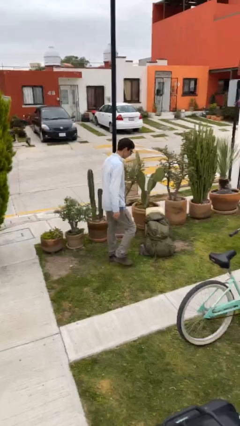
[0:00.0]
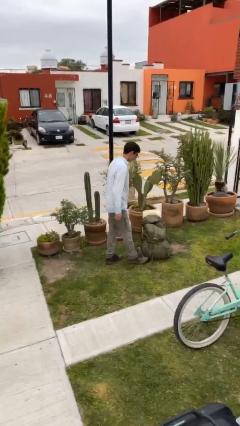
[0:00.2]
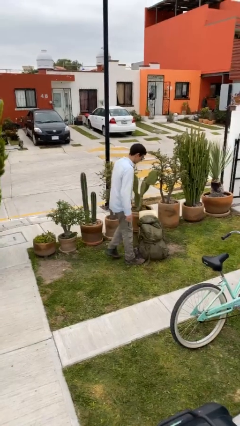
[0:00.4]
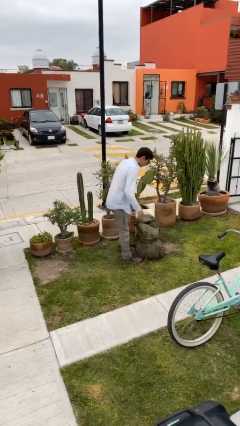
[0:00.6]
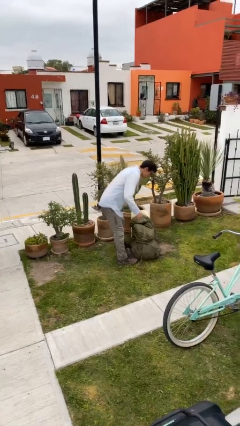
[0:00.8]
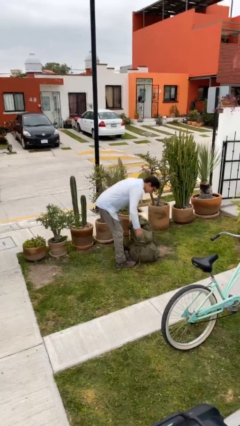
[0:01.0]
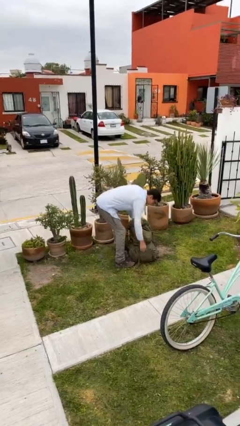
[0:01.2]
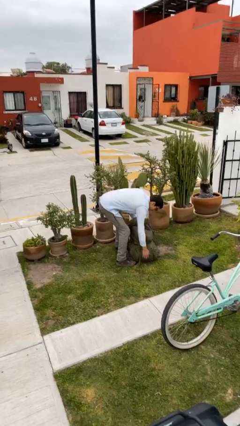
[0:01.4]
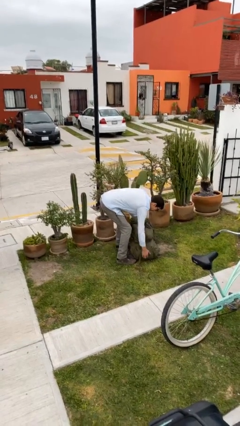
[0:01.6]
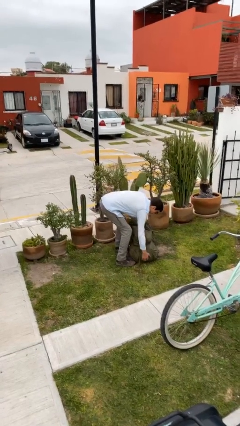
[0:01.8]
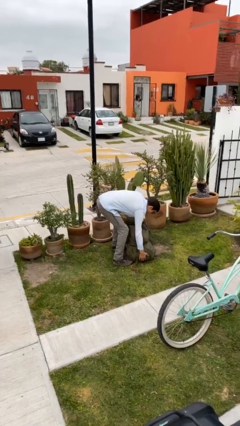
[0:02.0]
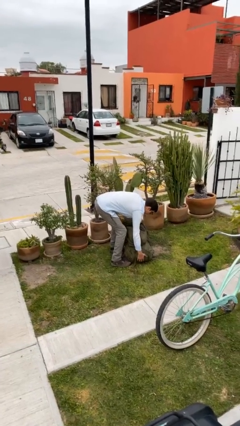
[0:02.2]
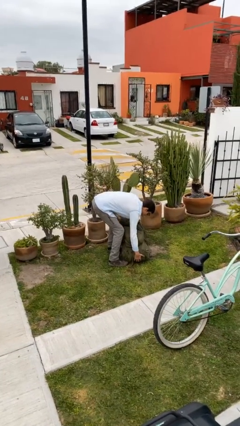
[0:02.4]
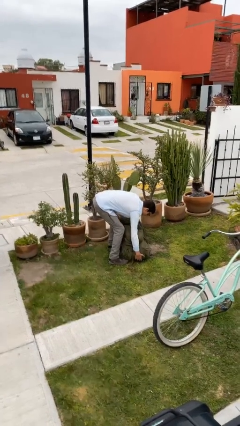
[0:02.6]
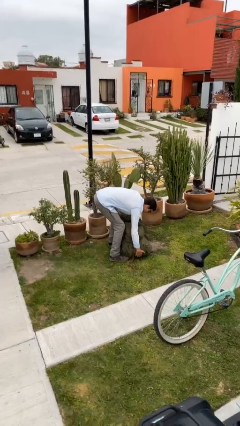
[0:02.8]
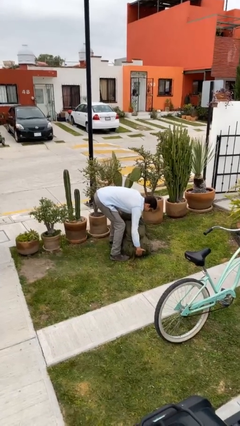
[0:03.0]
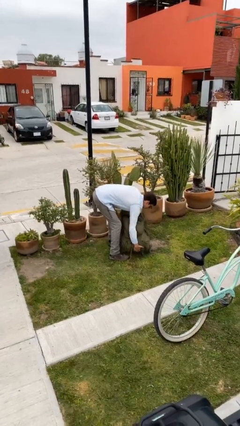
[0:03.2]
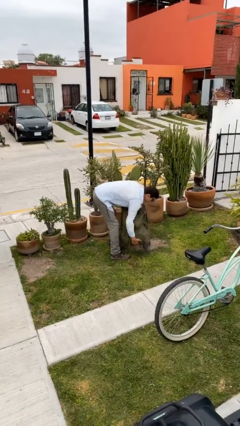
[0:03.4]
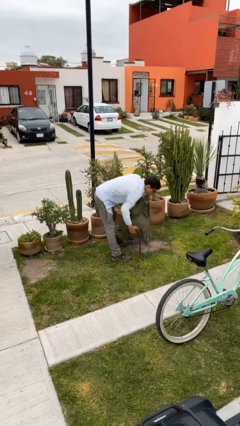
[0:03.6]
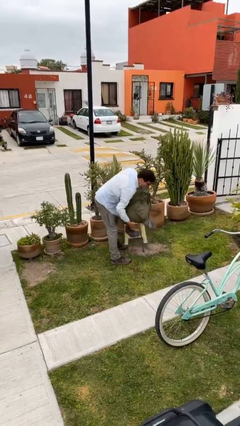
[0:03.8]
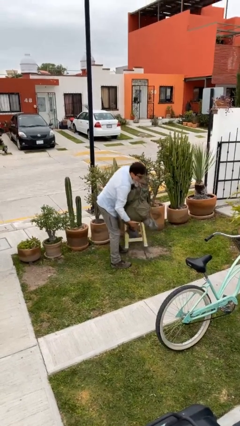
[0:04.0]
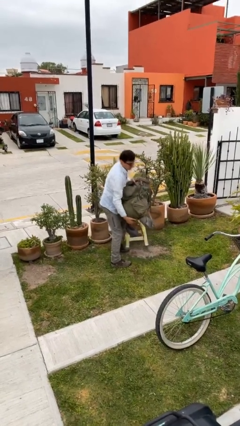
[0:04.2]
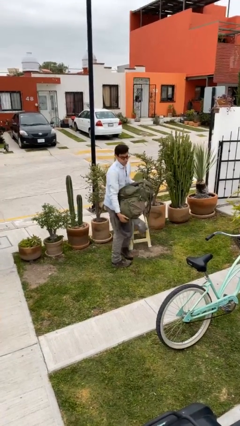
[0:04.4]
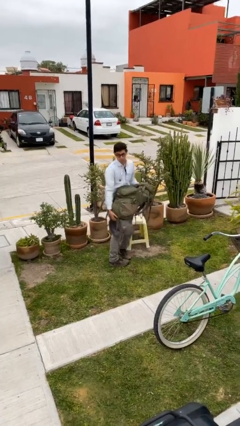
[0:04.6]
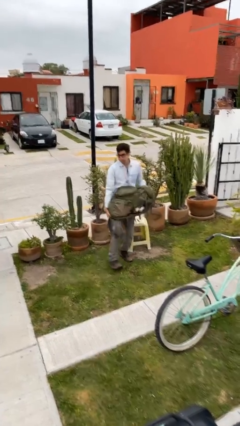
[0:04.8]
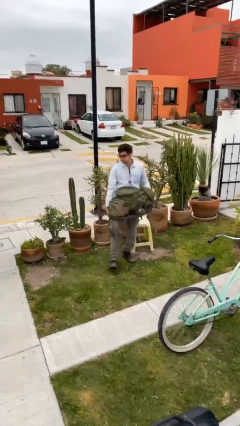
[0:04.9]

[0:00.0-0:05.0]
person picks up object from floor

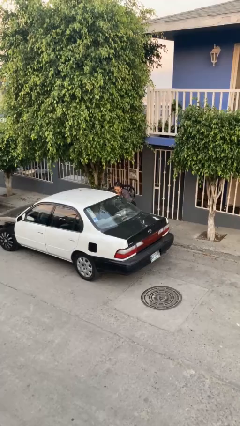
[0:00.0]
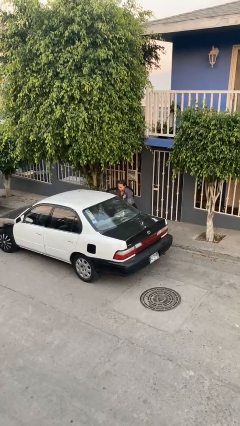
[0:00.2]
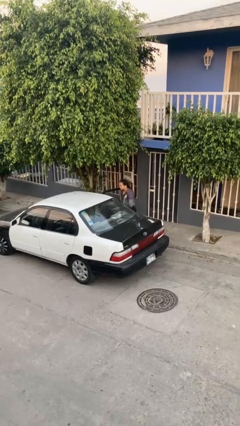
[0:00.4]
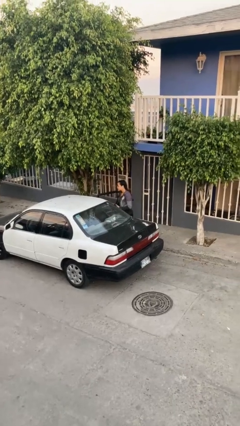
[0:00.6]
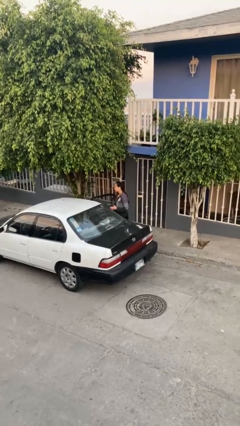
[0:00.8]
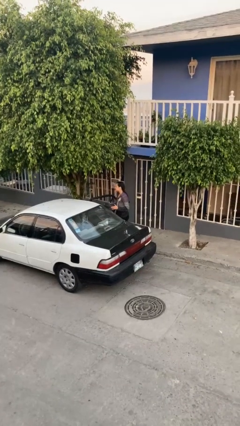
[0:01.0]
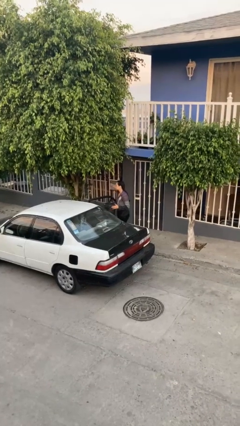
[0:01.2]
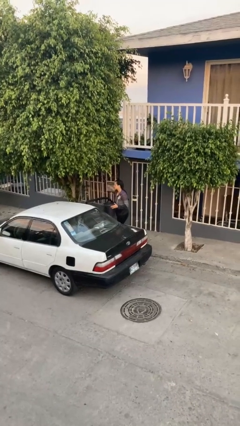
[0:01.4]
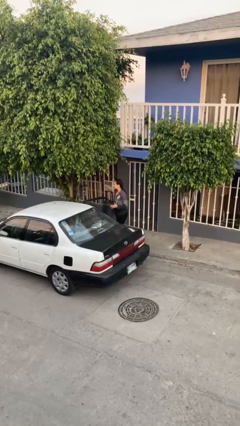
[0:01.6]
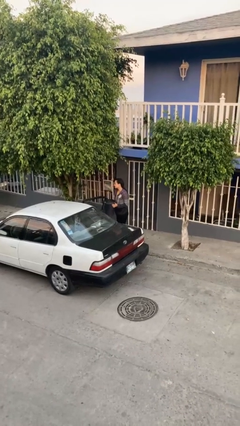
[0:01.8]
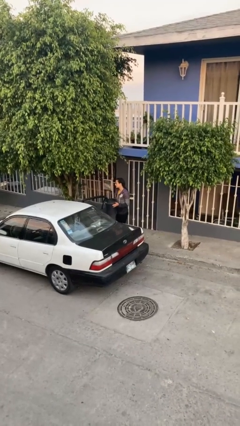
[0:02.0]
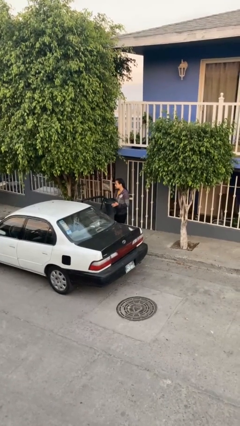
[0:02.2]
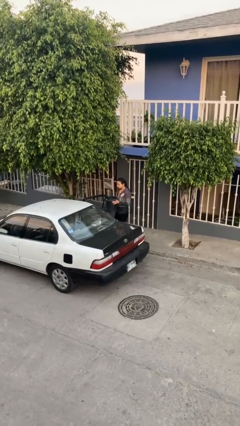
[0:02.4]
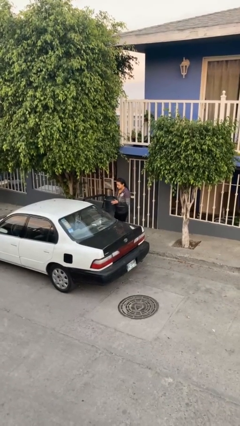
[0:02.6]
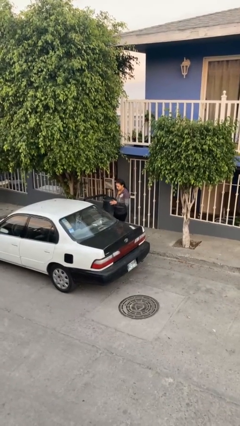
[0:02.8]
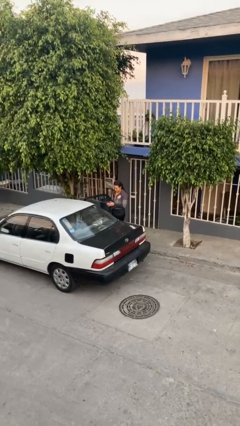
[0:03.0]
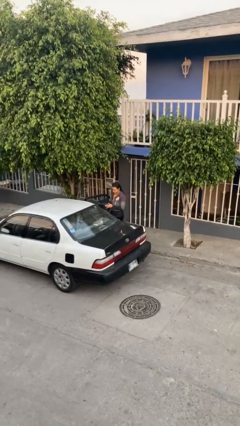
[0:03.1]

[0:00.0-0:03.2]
person unloads car

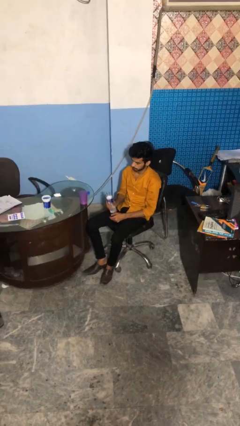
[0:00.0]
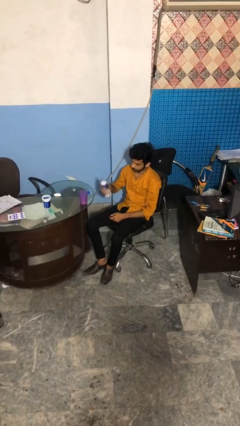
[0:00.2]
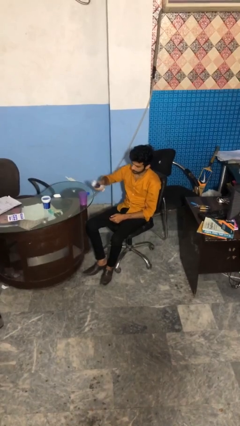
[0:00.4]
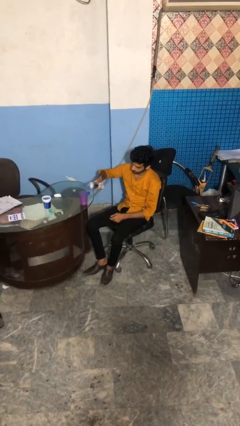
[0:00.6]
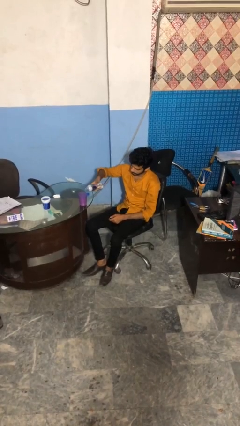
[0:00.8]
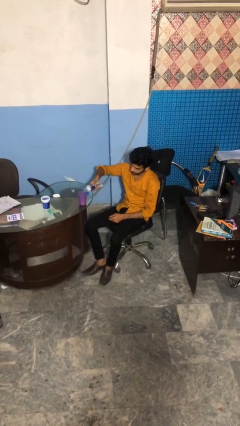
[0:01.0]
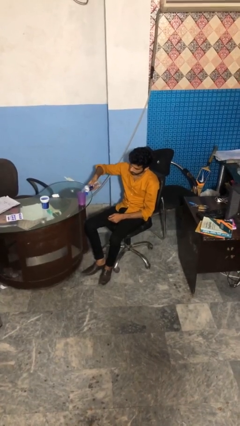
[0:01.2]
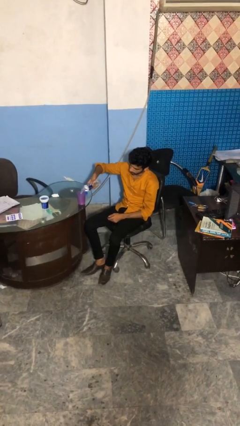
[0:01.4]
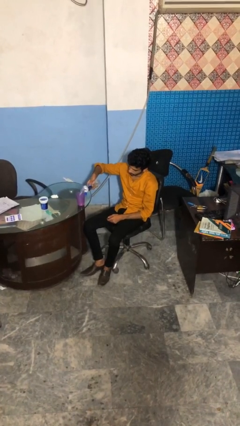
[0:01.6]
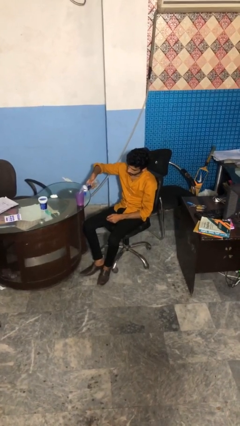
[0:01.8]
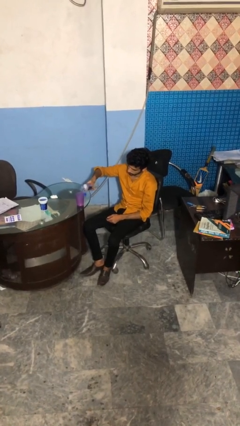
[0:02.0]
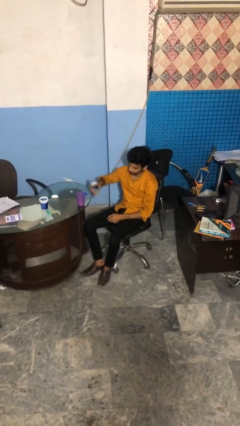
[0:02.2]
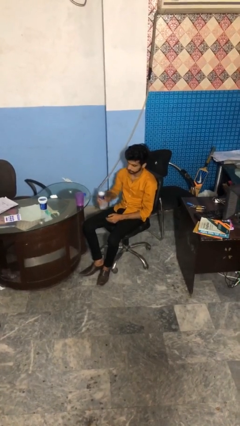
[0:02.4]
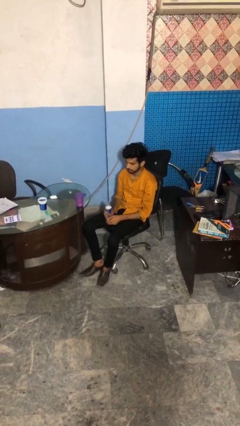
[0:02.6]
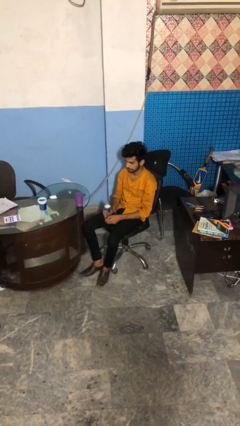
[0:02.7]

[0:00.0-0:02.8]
person pours liquid into cup

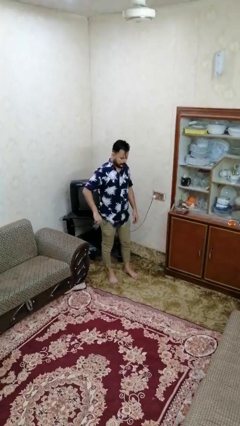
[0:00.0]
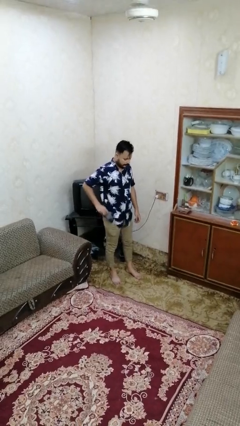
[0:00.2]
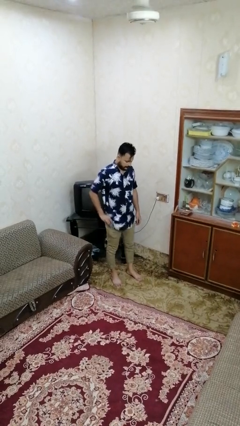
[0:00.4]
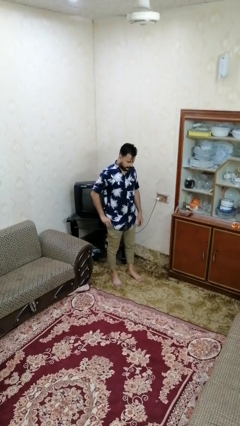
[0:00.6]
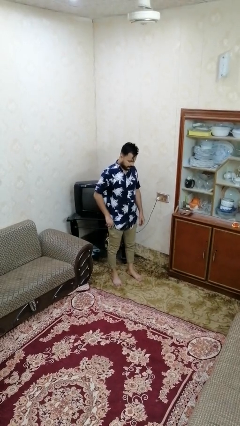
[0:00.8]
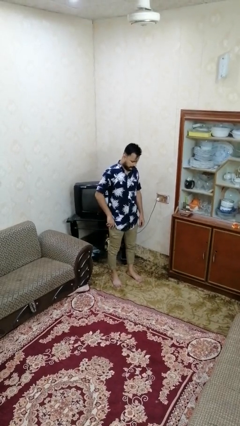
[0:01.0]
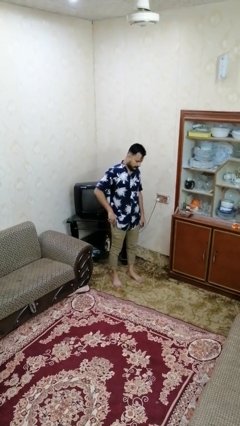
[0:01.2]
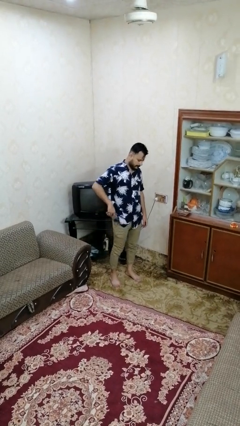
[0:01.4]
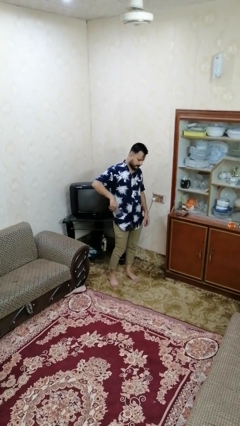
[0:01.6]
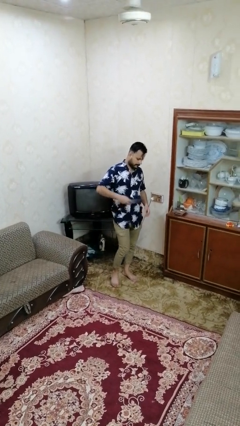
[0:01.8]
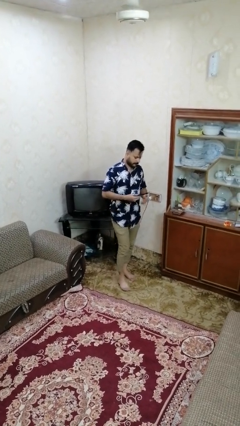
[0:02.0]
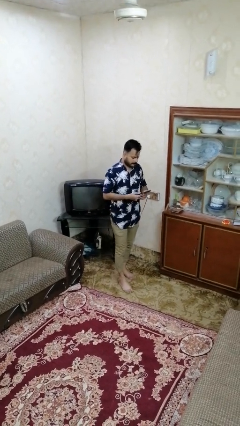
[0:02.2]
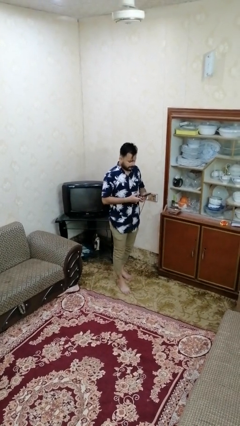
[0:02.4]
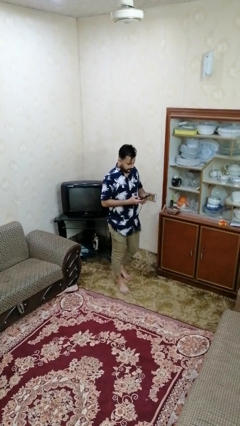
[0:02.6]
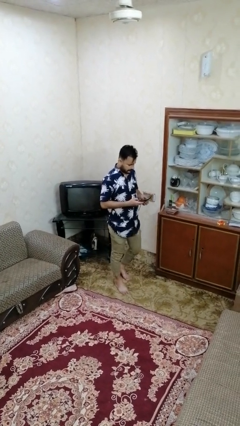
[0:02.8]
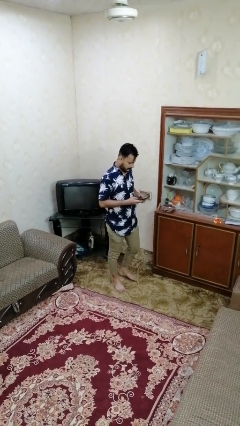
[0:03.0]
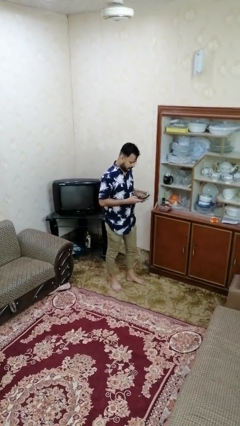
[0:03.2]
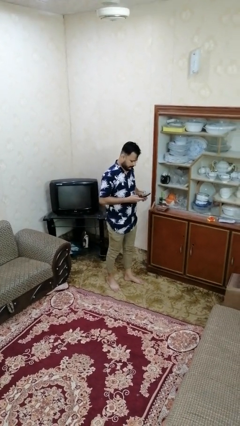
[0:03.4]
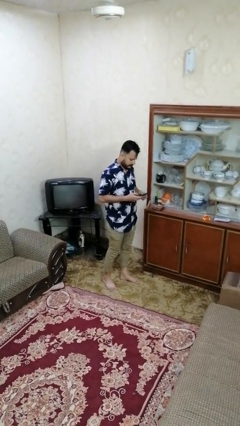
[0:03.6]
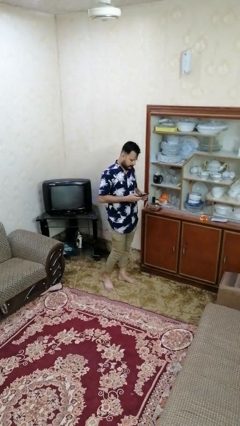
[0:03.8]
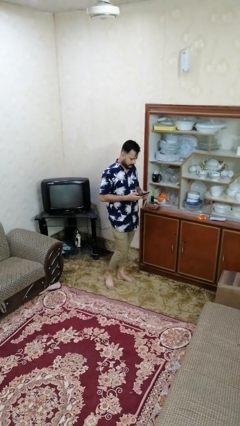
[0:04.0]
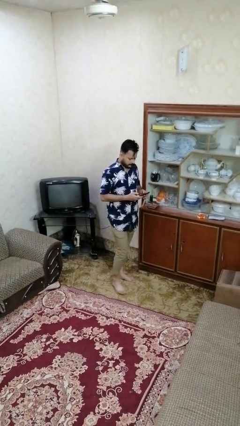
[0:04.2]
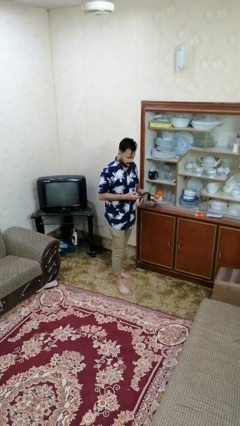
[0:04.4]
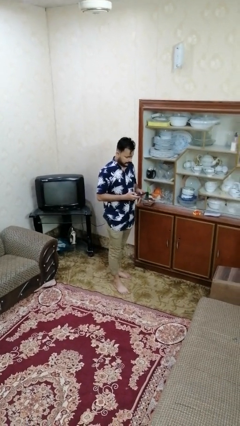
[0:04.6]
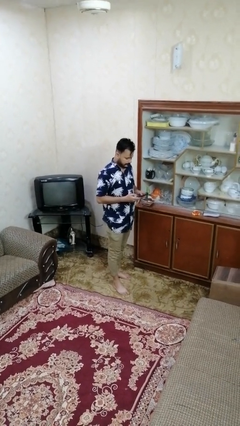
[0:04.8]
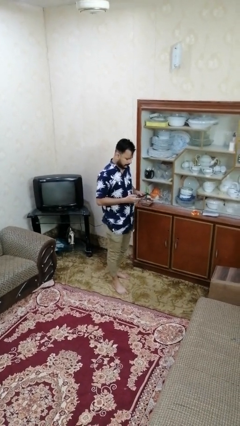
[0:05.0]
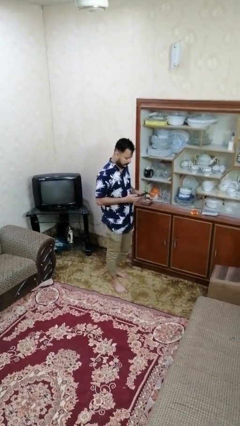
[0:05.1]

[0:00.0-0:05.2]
person takes phone from pocket

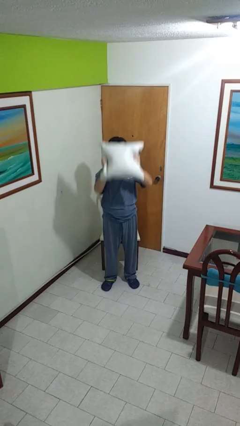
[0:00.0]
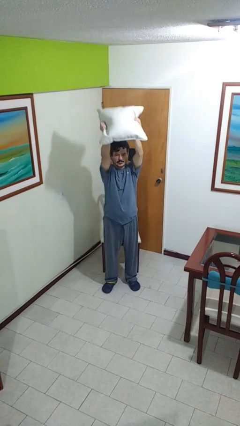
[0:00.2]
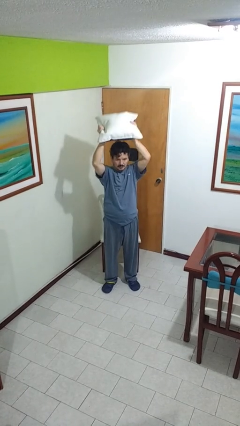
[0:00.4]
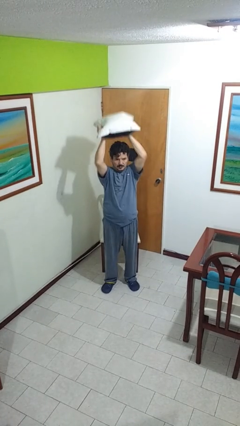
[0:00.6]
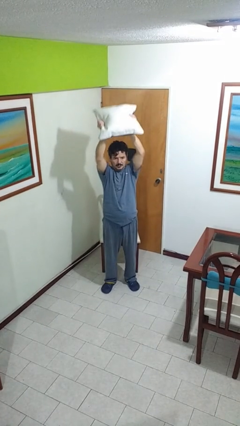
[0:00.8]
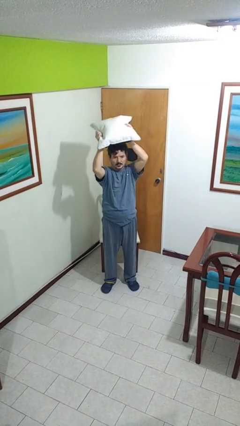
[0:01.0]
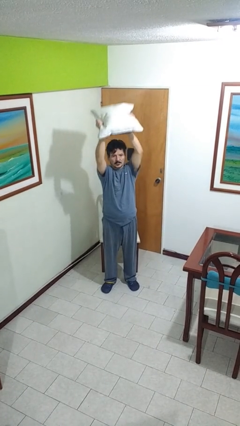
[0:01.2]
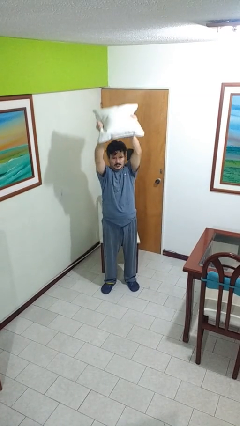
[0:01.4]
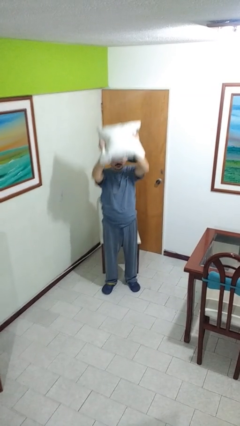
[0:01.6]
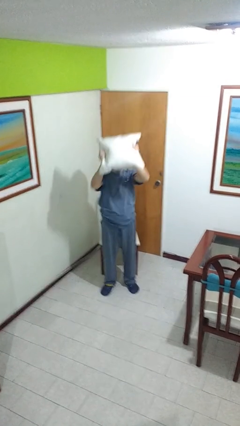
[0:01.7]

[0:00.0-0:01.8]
person holds object above head
